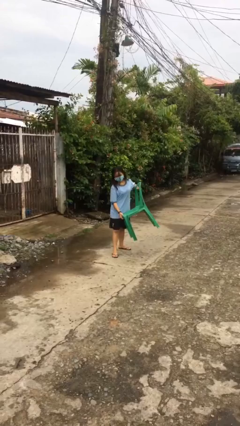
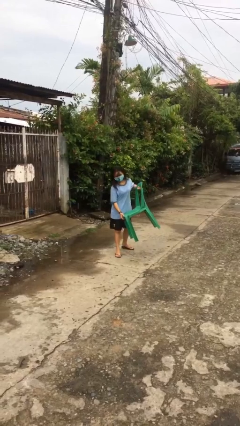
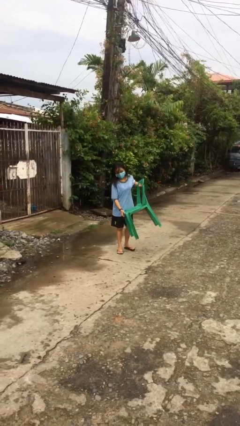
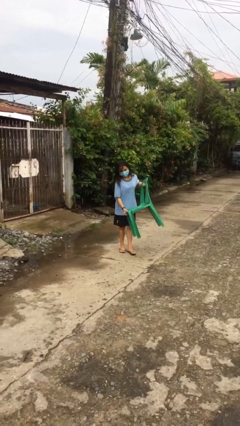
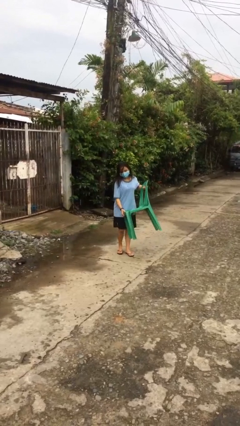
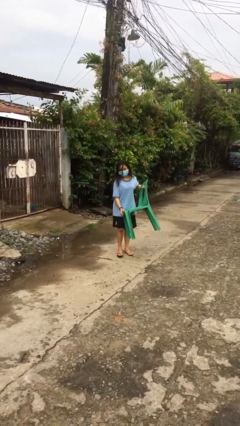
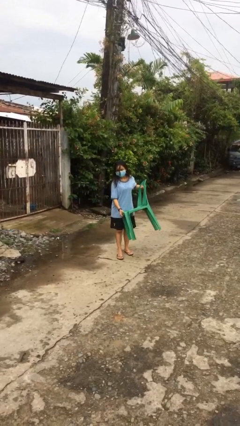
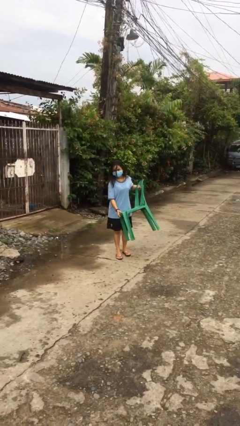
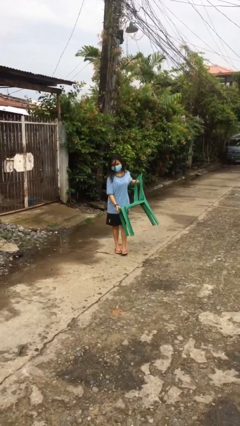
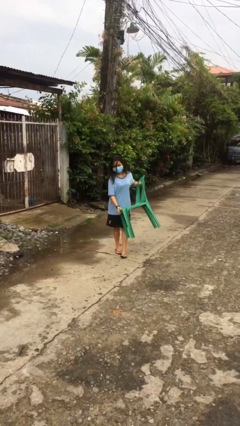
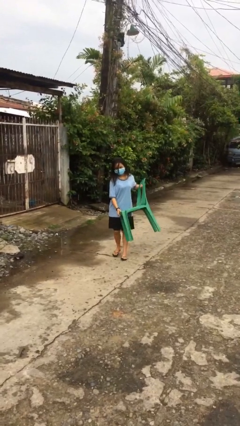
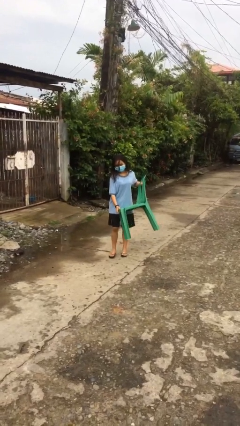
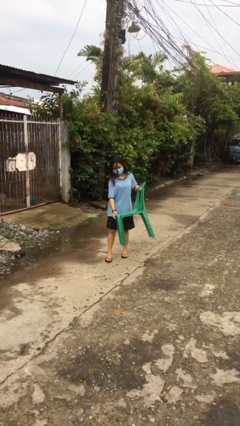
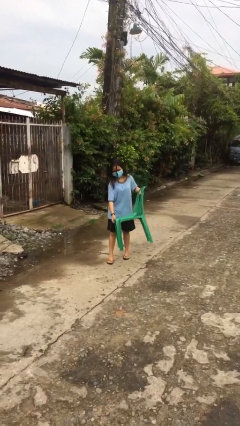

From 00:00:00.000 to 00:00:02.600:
person carries heavy object

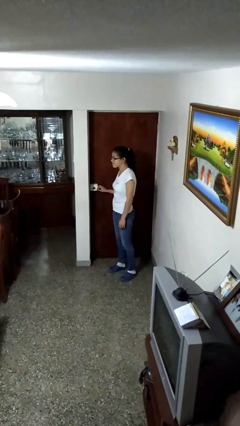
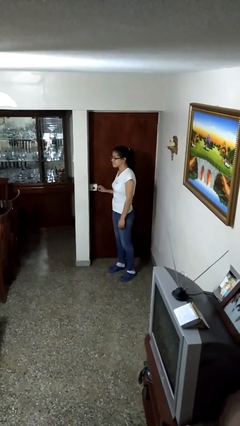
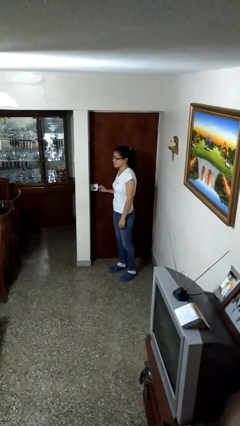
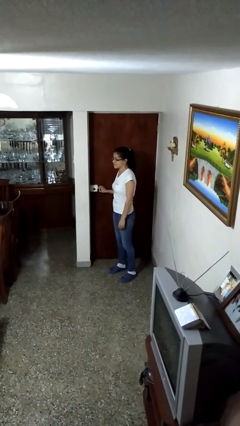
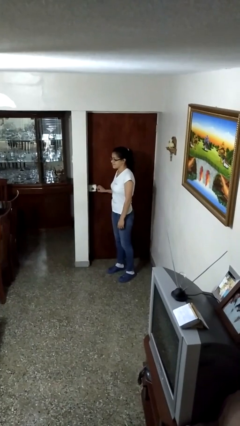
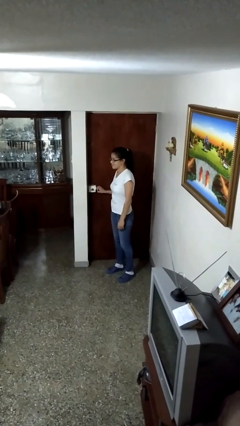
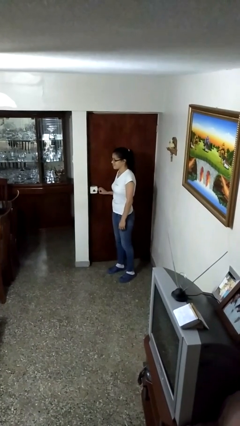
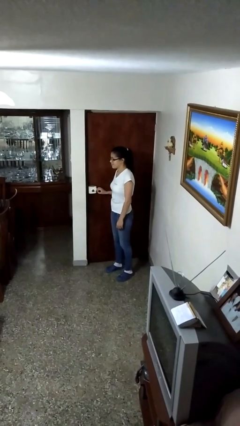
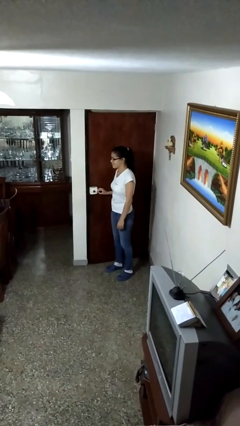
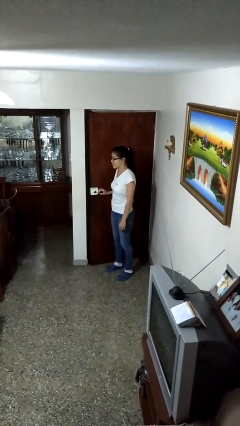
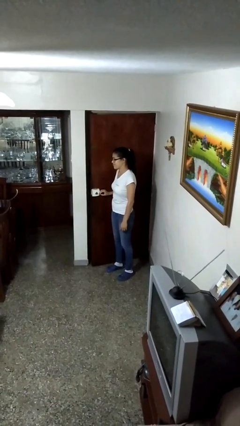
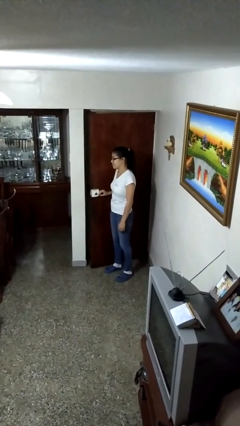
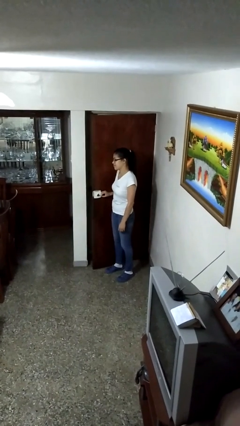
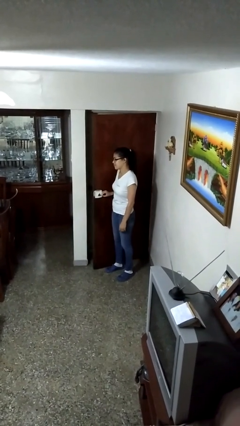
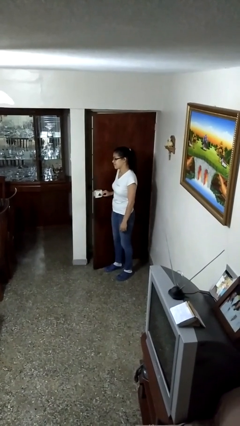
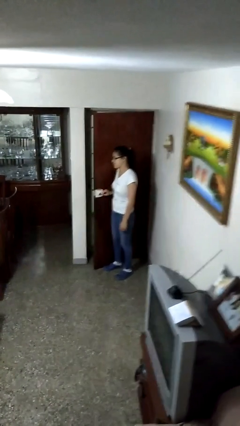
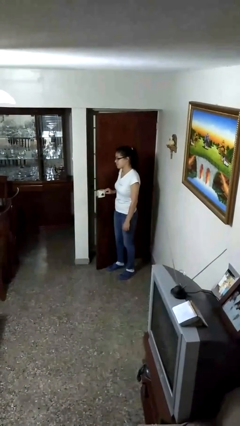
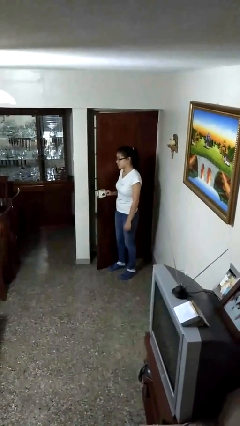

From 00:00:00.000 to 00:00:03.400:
person opens facility door

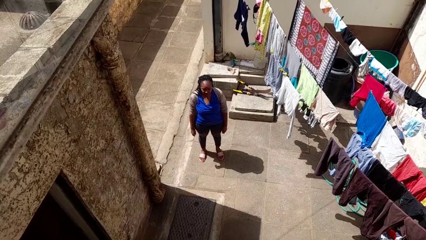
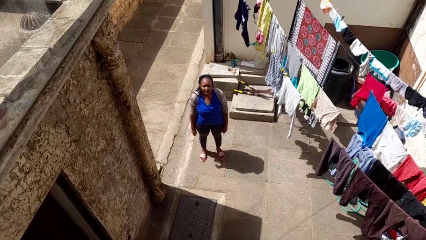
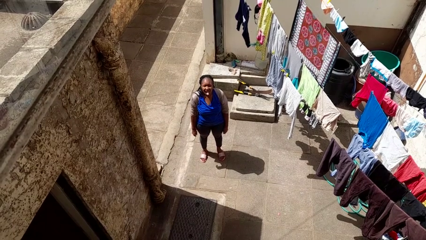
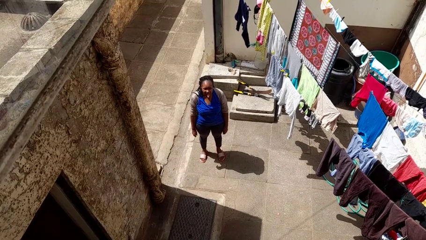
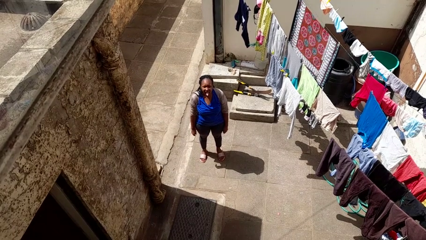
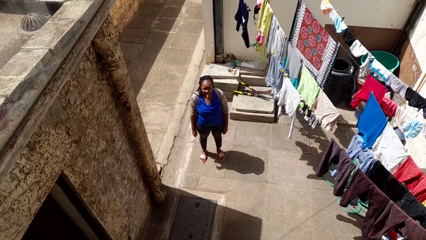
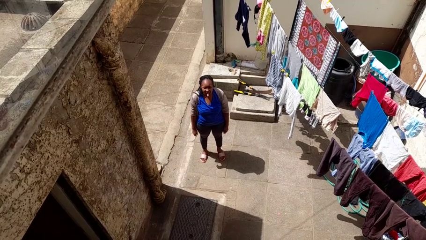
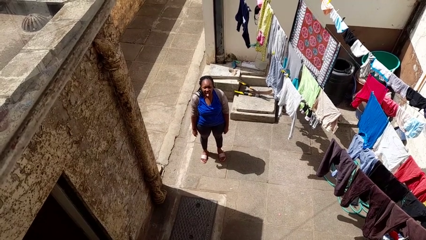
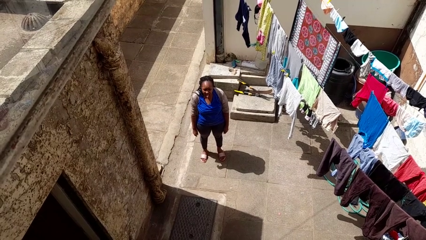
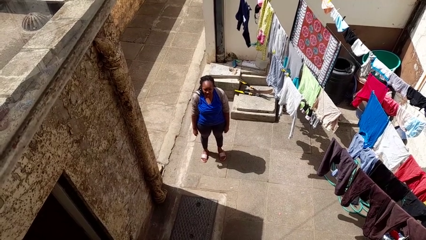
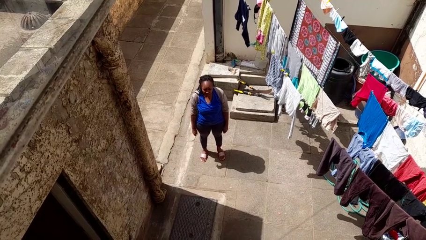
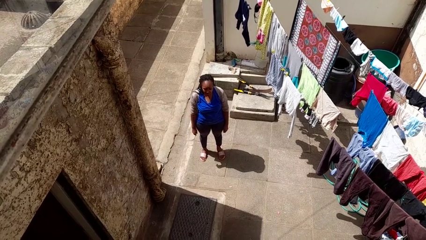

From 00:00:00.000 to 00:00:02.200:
person sticks out tongue

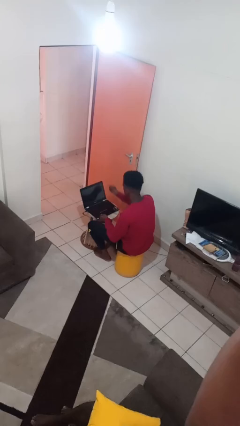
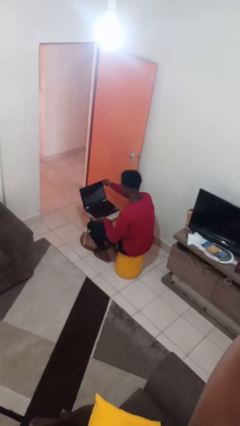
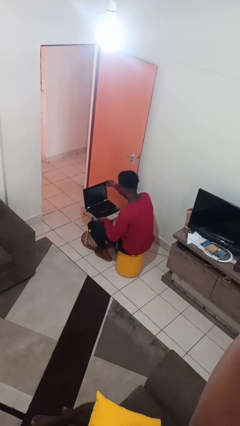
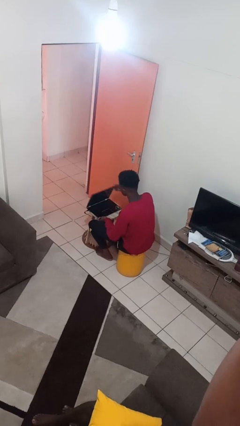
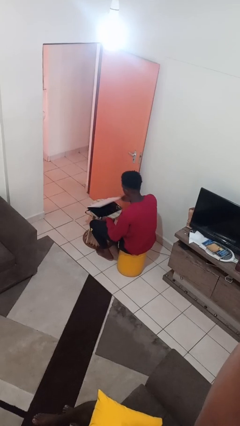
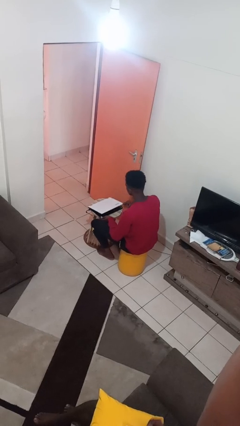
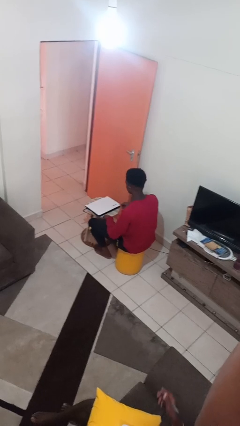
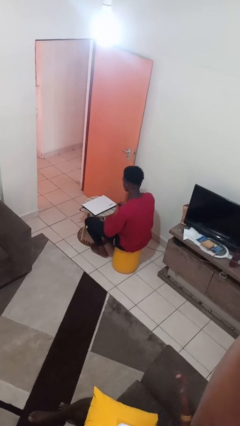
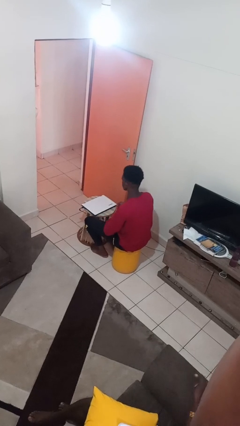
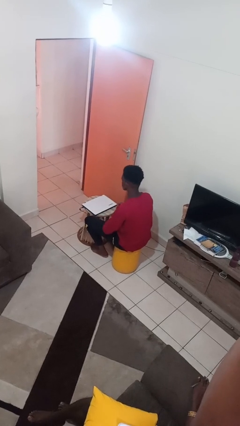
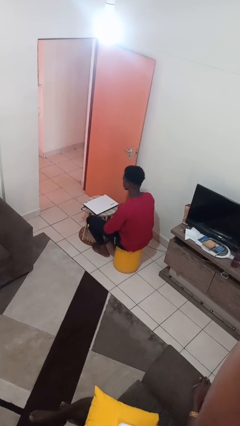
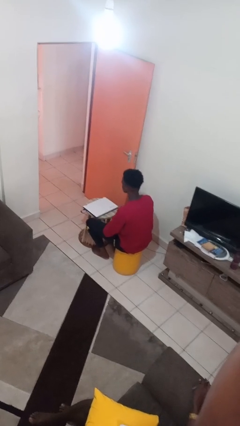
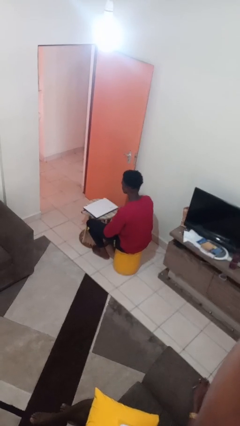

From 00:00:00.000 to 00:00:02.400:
person closes laptop

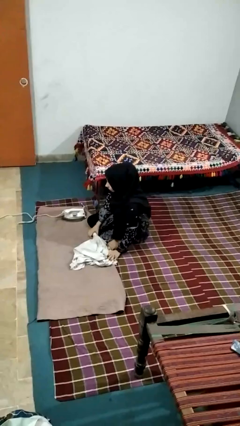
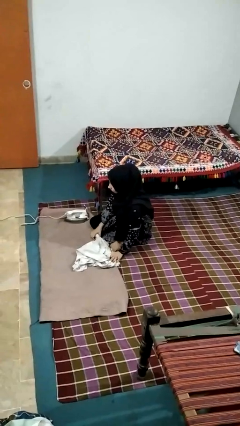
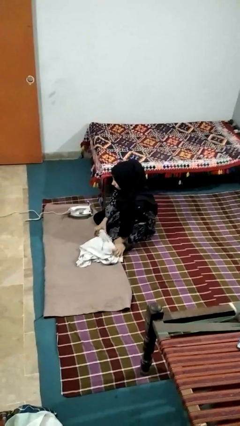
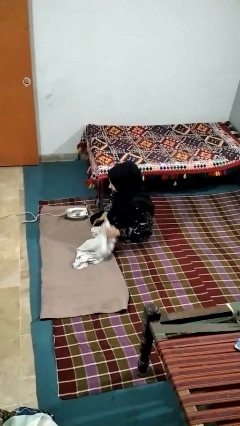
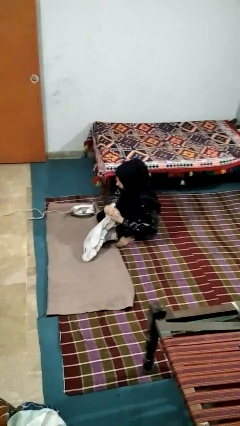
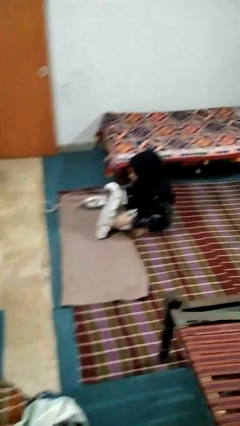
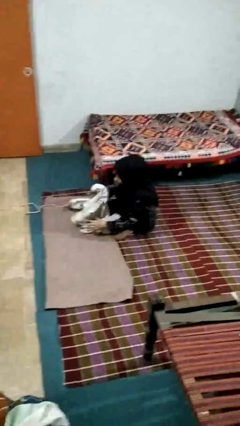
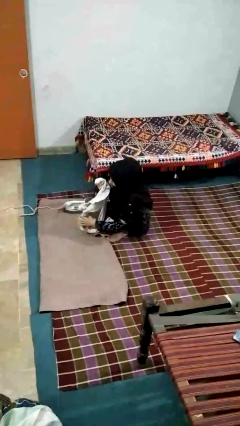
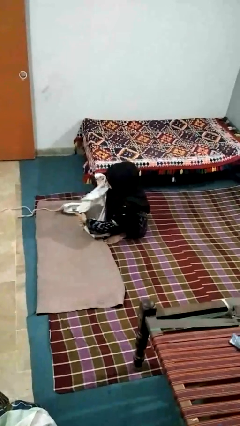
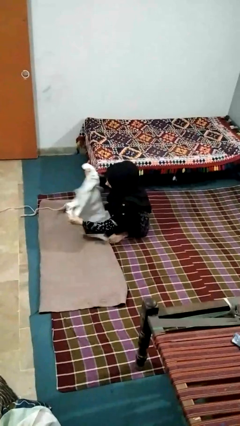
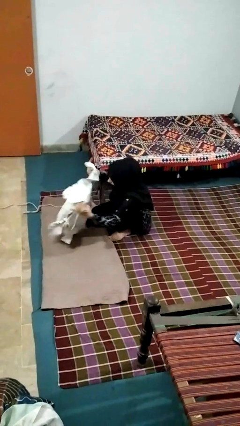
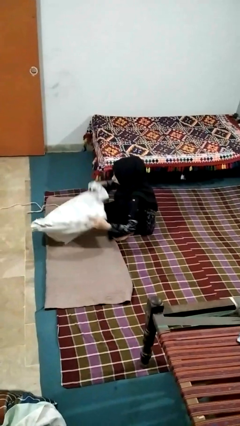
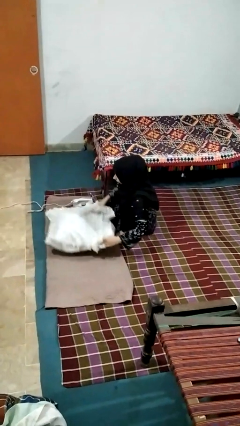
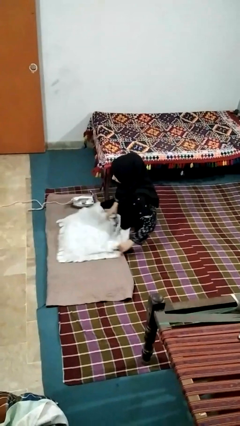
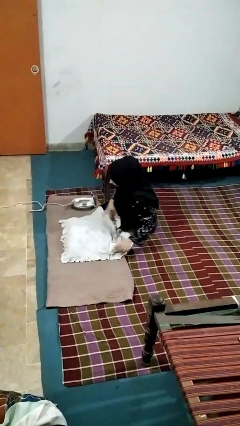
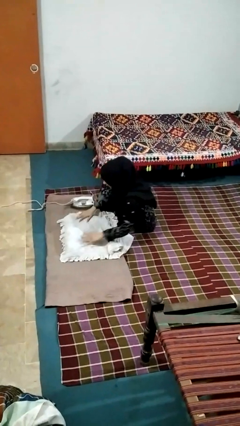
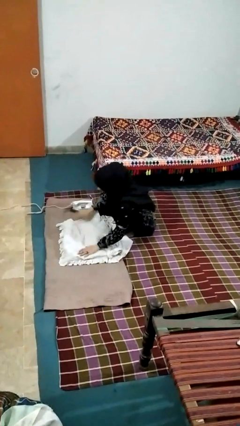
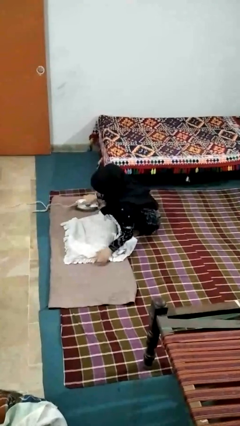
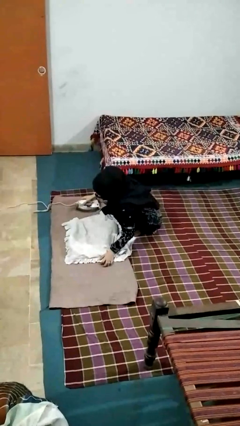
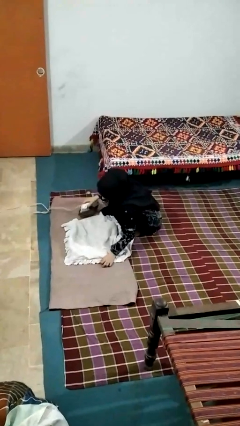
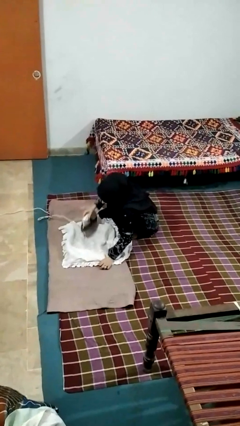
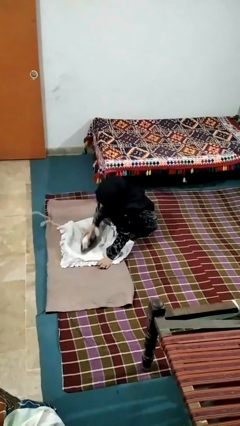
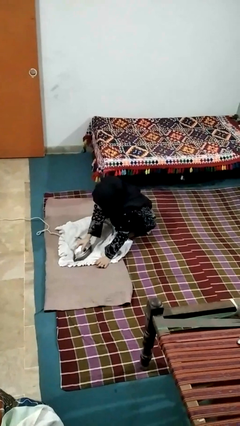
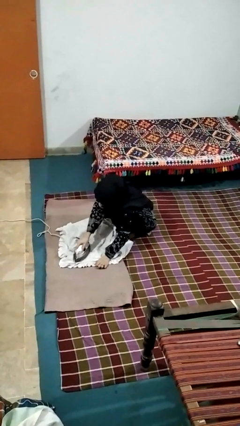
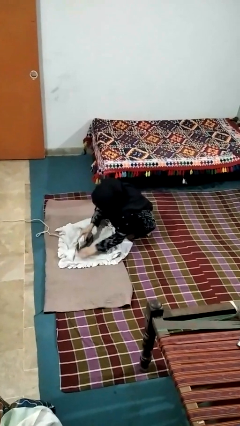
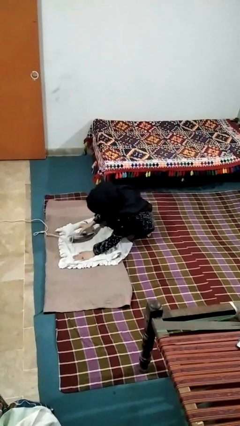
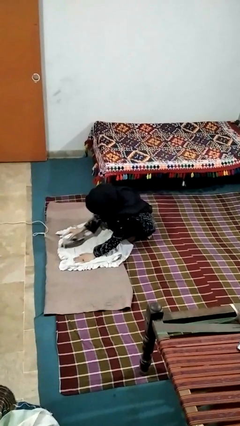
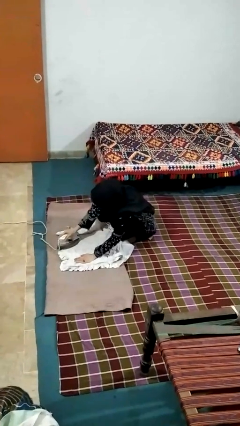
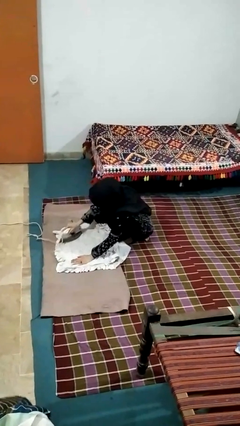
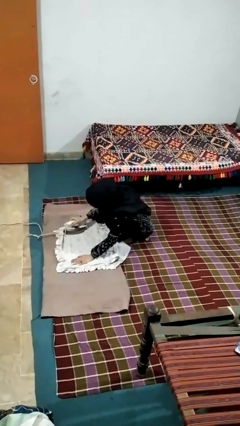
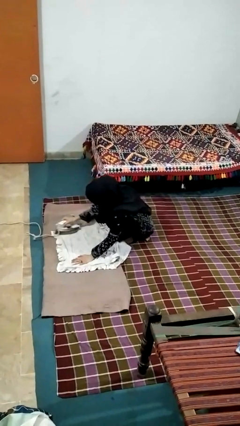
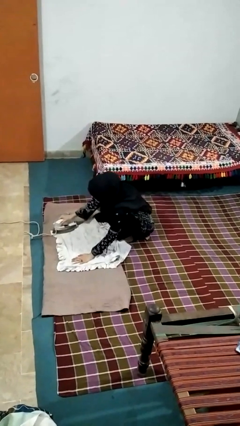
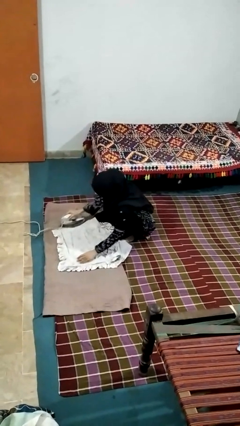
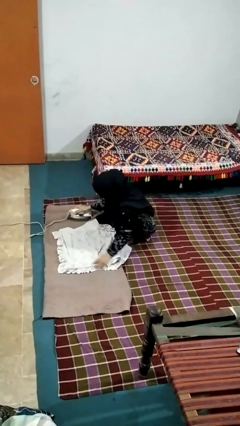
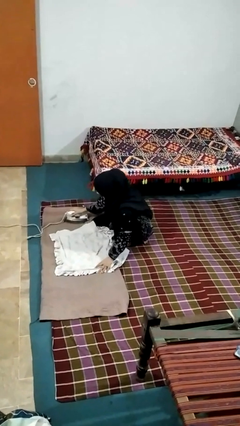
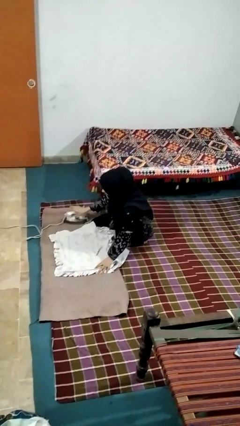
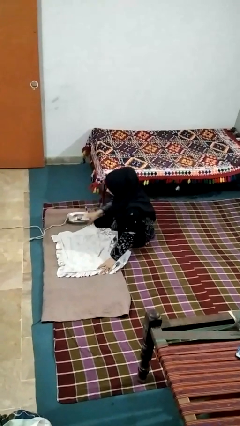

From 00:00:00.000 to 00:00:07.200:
person irons clothes
